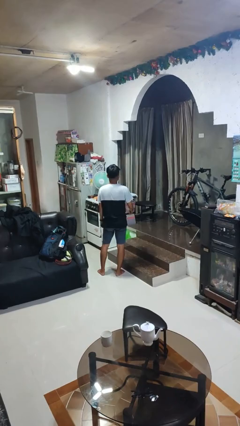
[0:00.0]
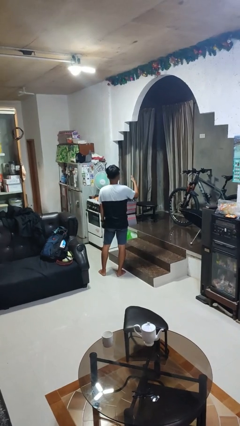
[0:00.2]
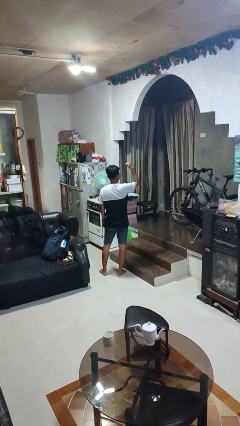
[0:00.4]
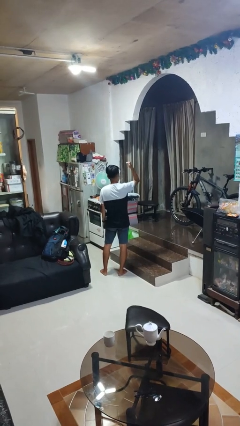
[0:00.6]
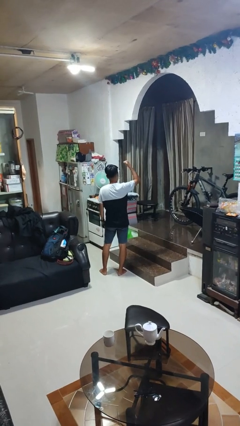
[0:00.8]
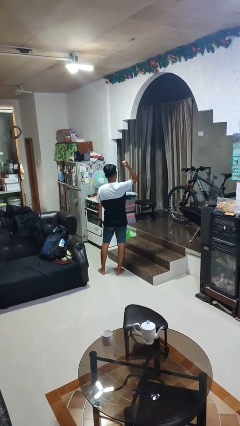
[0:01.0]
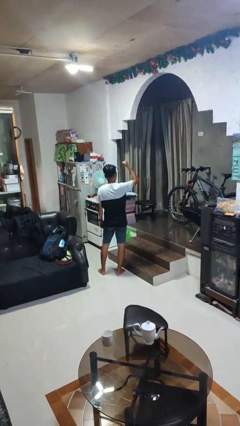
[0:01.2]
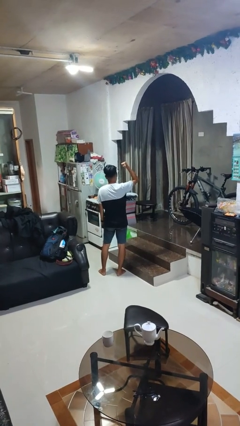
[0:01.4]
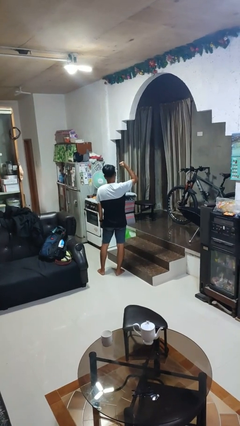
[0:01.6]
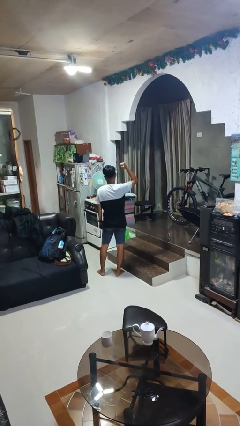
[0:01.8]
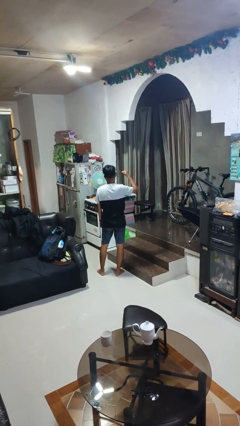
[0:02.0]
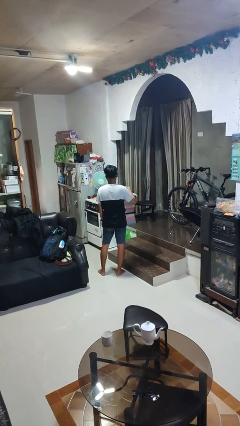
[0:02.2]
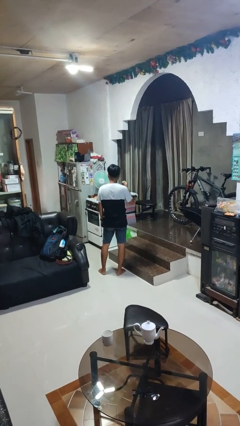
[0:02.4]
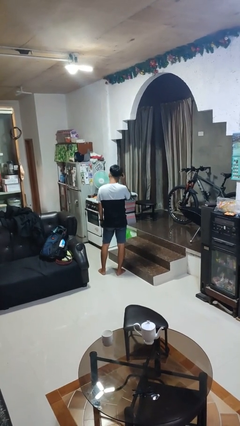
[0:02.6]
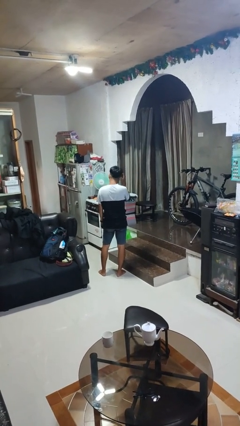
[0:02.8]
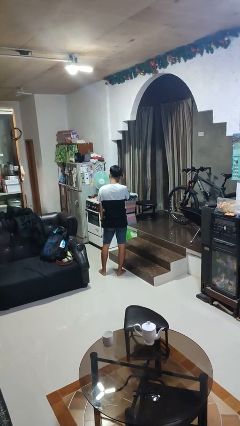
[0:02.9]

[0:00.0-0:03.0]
person gestures behind me

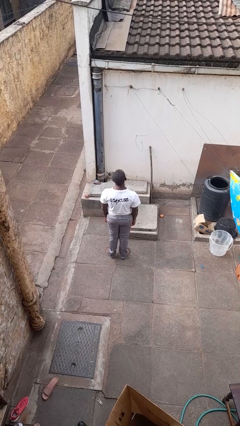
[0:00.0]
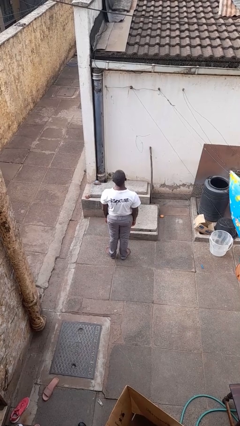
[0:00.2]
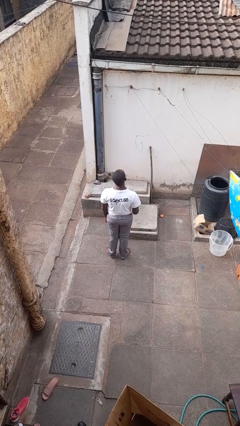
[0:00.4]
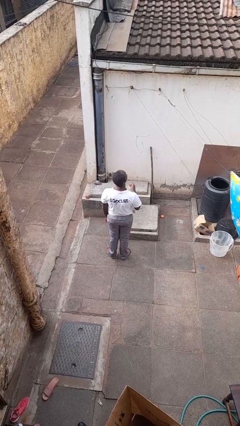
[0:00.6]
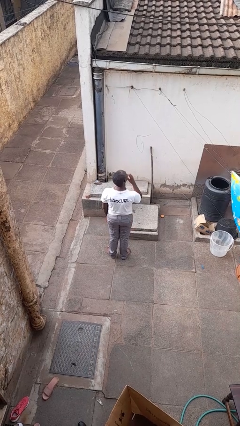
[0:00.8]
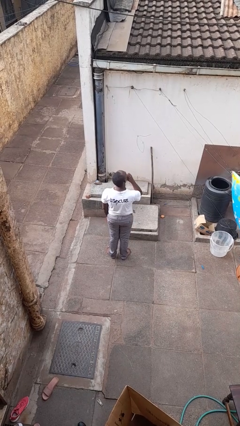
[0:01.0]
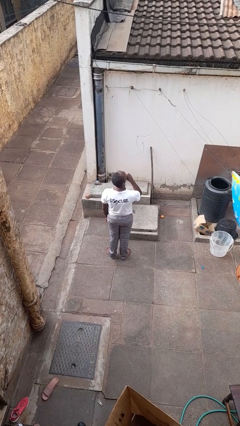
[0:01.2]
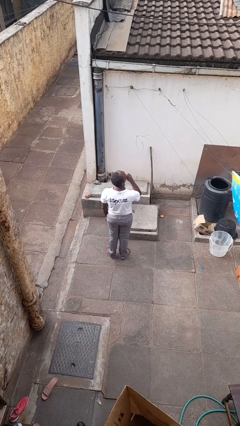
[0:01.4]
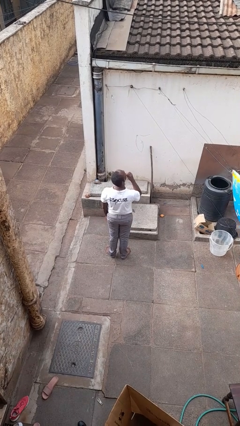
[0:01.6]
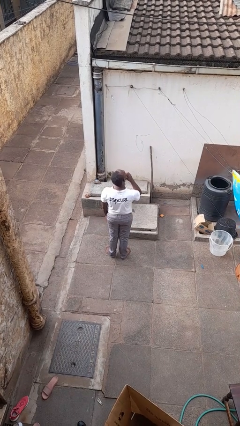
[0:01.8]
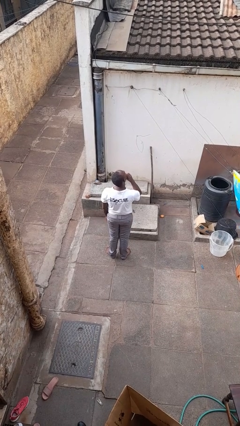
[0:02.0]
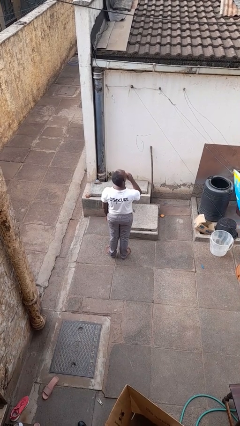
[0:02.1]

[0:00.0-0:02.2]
person strokes chin

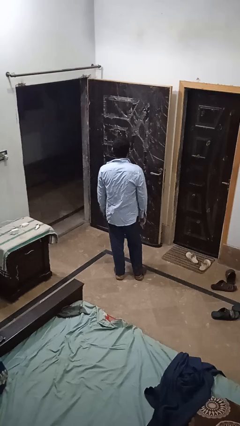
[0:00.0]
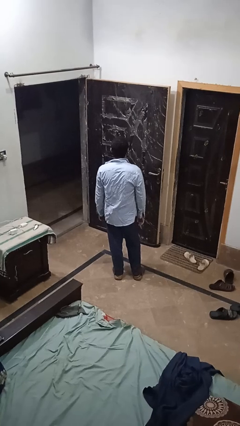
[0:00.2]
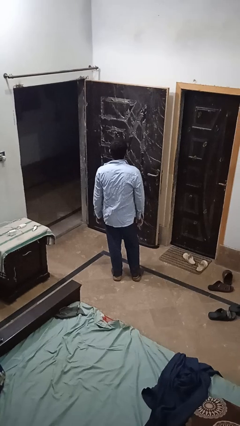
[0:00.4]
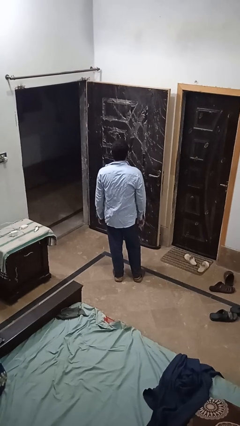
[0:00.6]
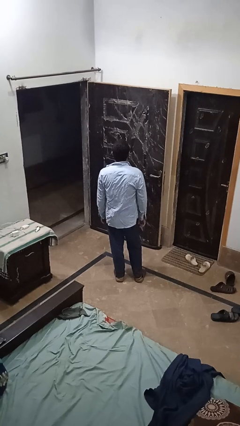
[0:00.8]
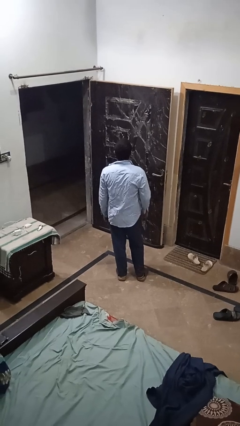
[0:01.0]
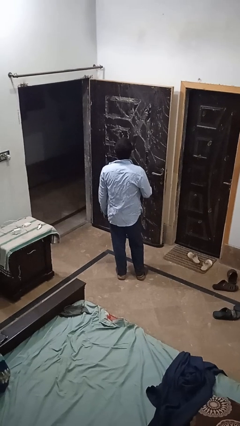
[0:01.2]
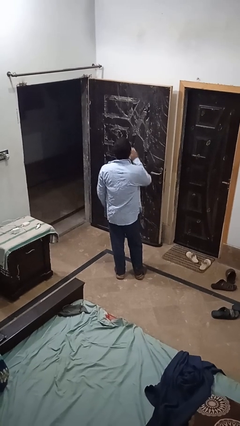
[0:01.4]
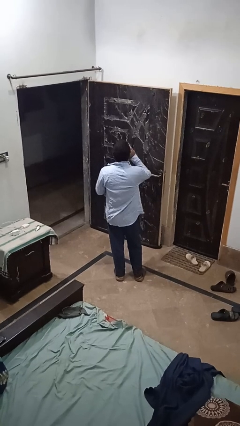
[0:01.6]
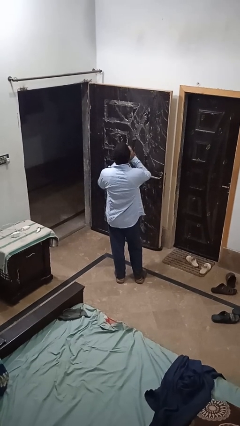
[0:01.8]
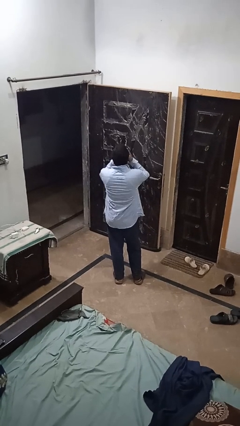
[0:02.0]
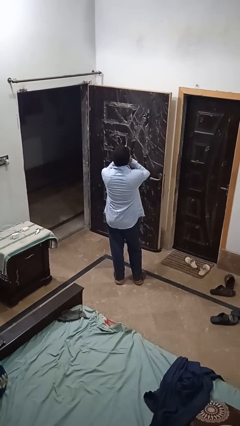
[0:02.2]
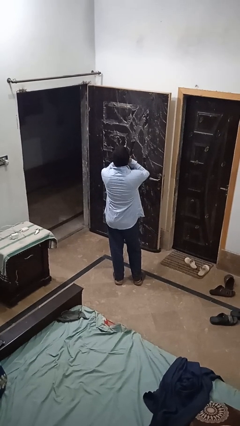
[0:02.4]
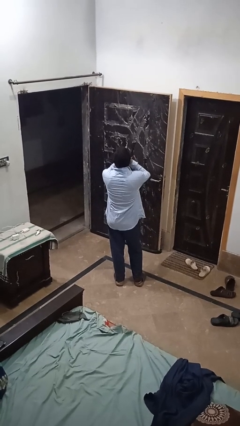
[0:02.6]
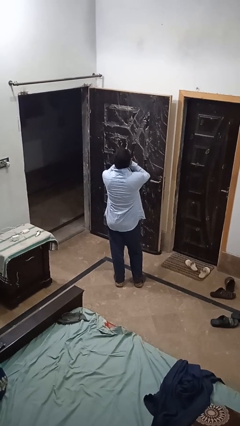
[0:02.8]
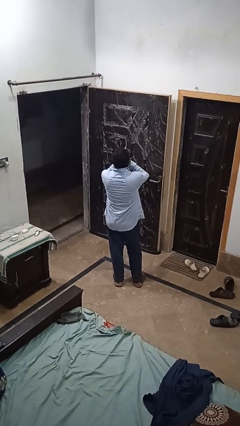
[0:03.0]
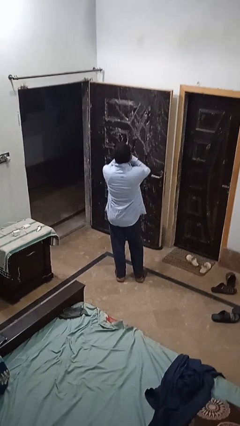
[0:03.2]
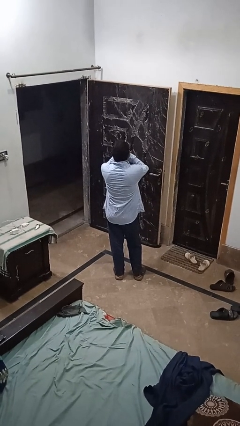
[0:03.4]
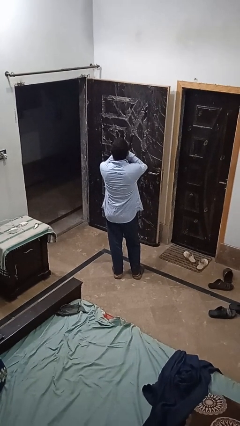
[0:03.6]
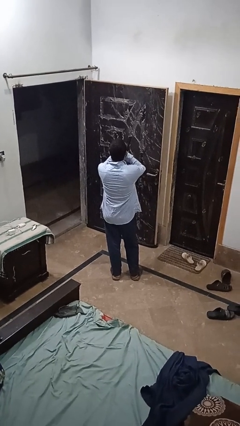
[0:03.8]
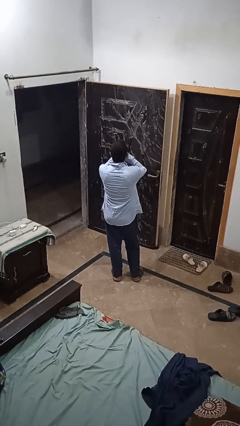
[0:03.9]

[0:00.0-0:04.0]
person yawns

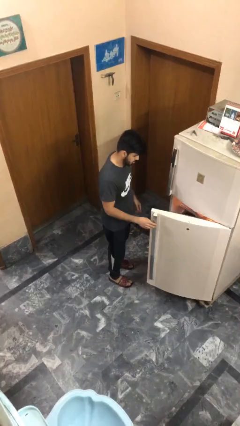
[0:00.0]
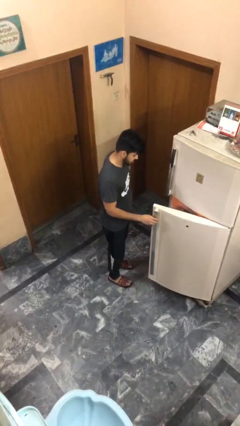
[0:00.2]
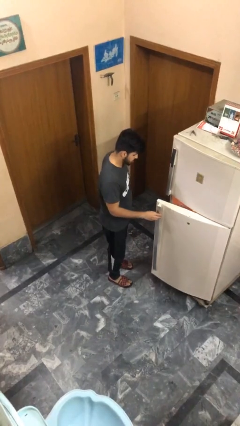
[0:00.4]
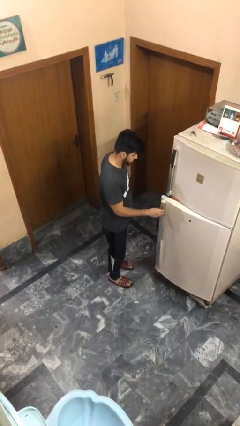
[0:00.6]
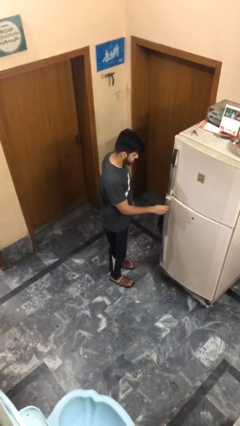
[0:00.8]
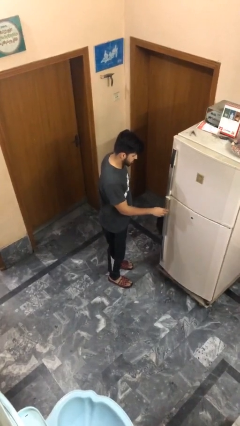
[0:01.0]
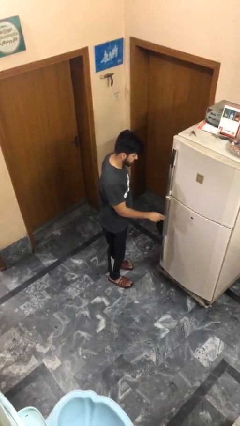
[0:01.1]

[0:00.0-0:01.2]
person closes refrigerator

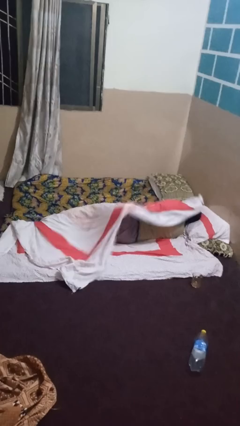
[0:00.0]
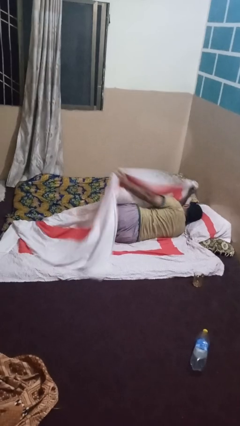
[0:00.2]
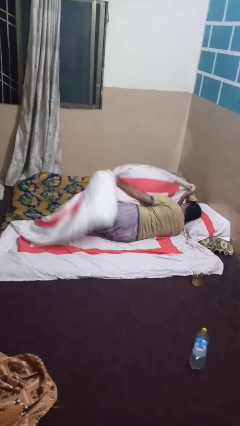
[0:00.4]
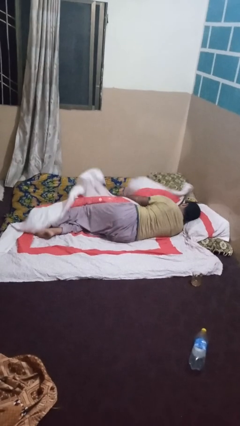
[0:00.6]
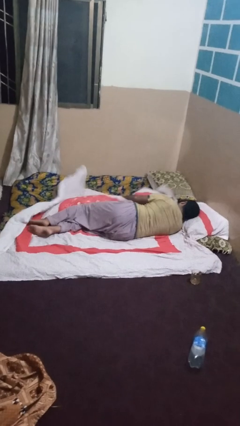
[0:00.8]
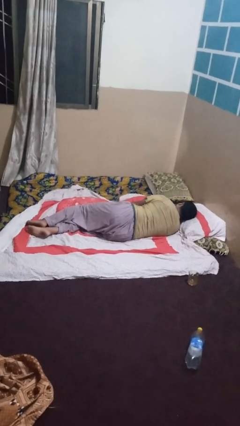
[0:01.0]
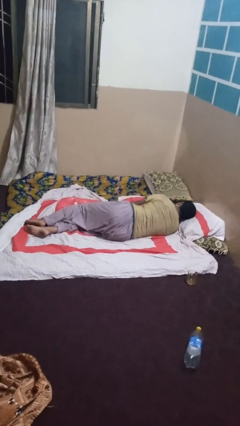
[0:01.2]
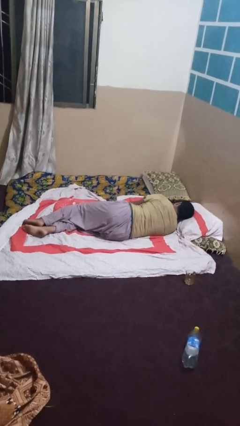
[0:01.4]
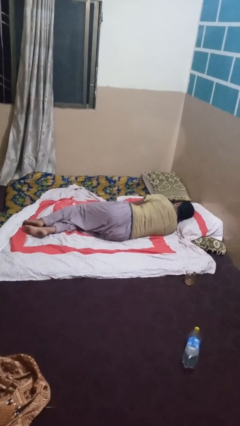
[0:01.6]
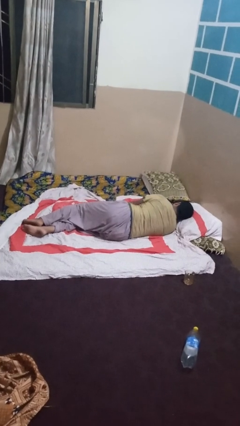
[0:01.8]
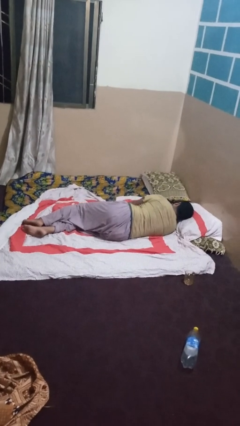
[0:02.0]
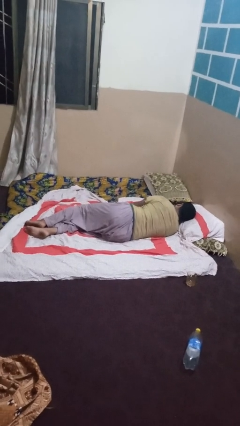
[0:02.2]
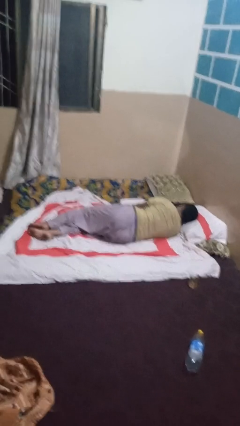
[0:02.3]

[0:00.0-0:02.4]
person uncovers with bedsheets

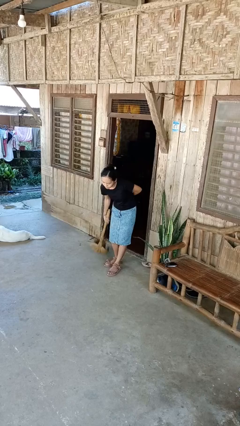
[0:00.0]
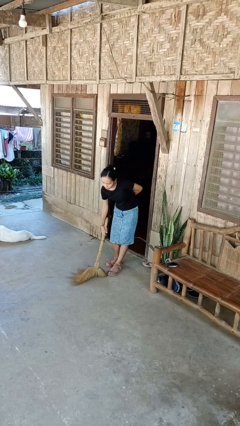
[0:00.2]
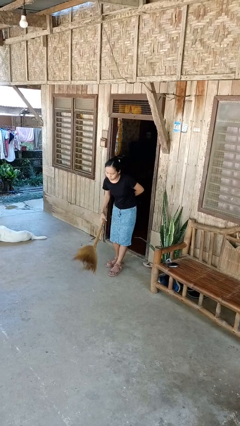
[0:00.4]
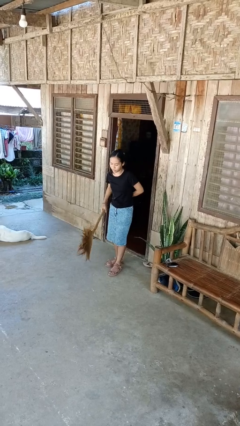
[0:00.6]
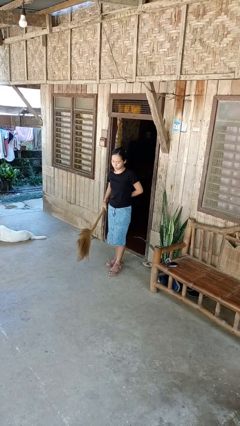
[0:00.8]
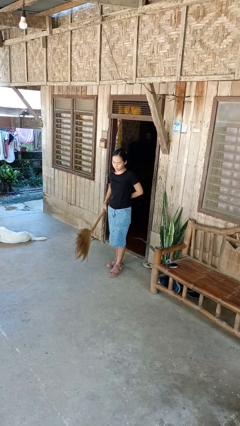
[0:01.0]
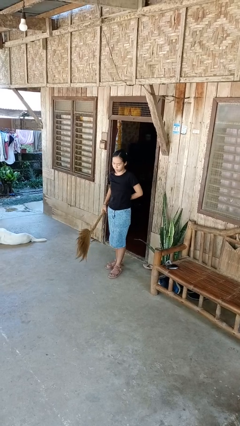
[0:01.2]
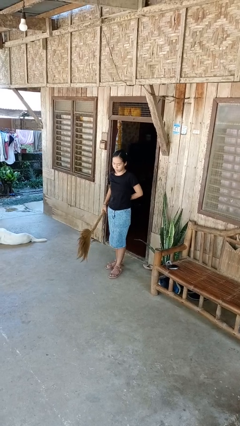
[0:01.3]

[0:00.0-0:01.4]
person sweeps floor

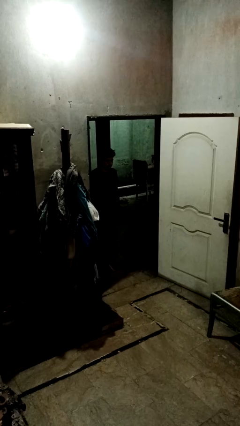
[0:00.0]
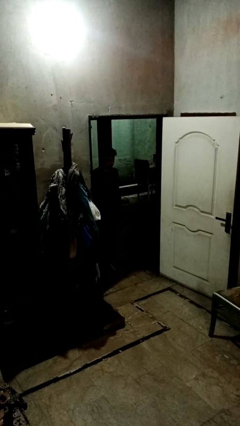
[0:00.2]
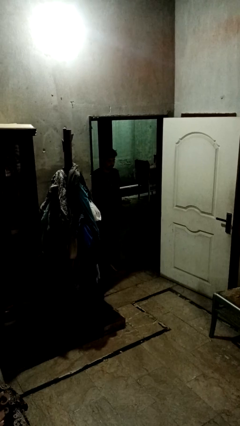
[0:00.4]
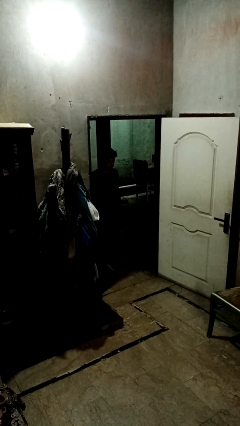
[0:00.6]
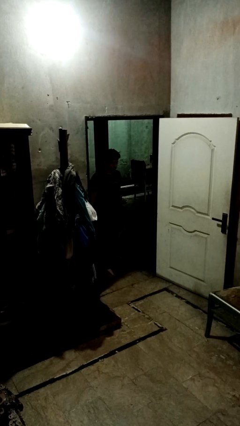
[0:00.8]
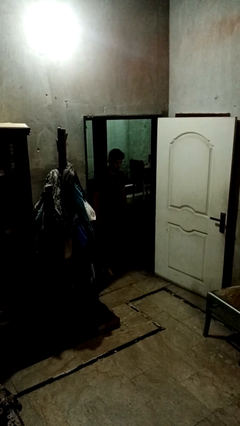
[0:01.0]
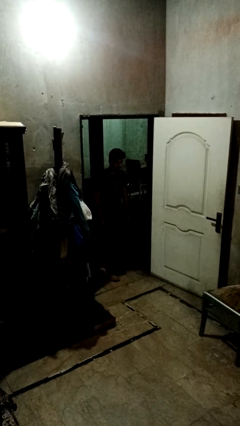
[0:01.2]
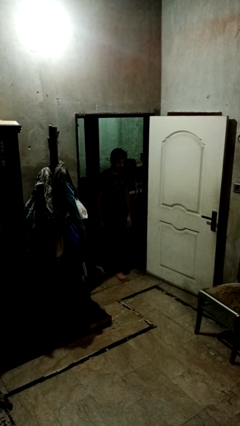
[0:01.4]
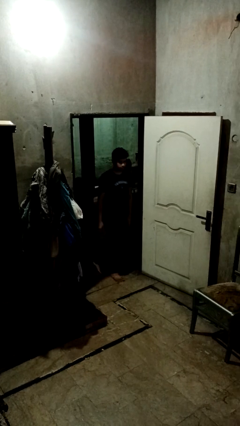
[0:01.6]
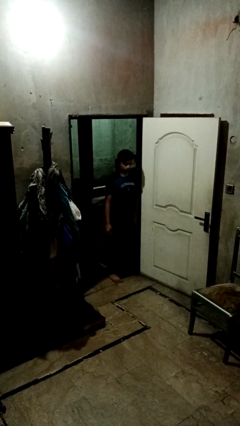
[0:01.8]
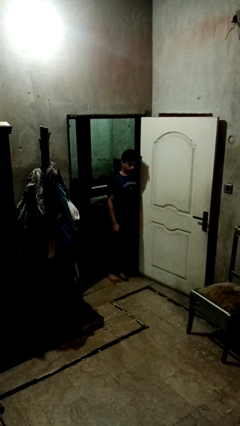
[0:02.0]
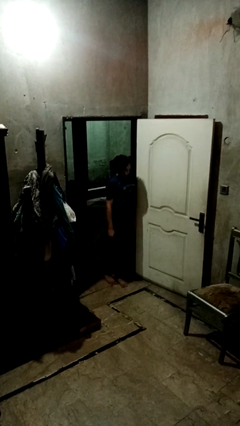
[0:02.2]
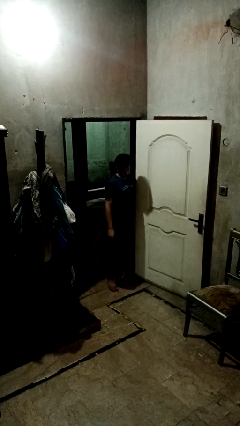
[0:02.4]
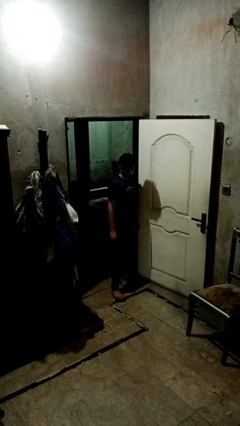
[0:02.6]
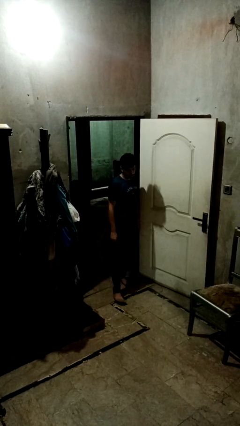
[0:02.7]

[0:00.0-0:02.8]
person bumps into wall
